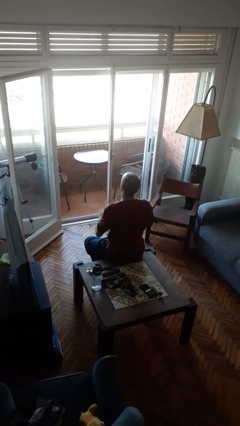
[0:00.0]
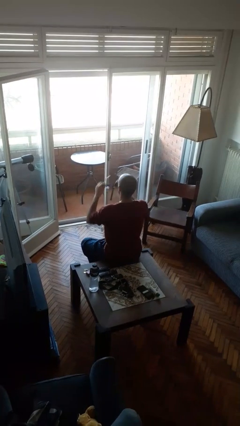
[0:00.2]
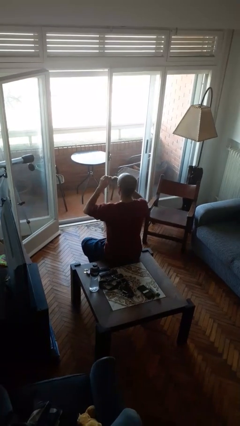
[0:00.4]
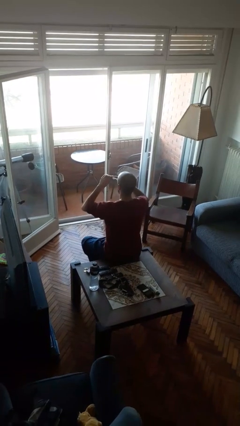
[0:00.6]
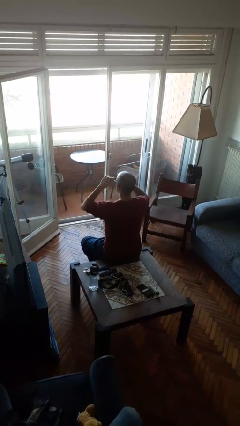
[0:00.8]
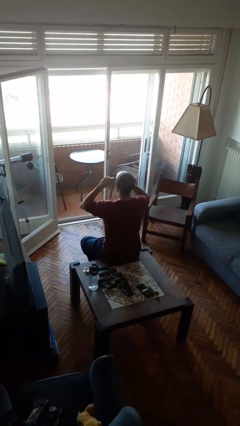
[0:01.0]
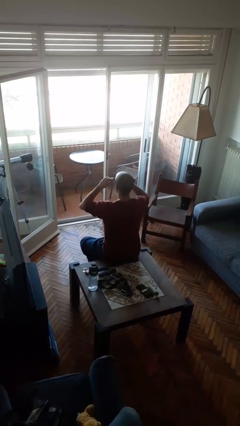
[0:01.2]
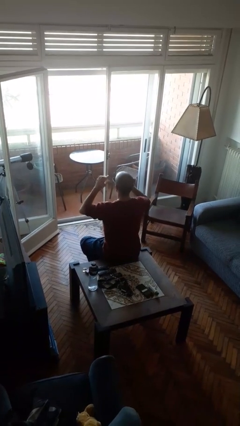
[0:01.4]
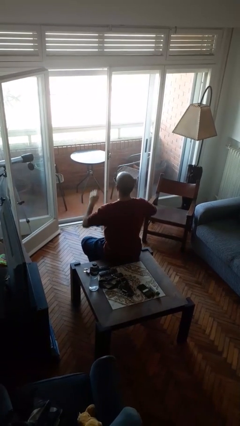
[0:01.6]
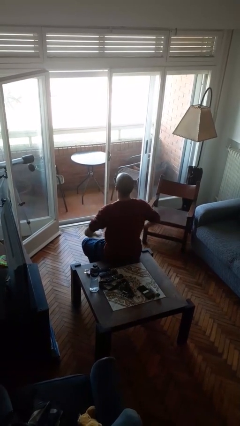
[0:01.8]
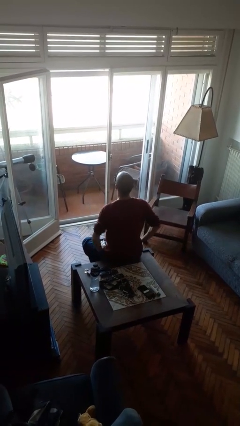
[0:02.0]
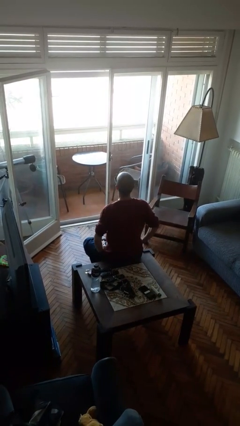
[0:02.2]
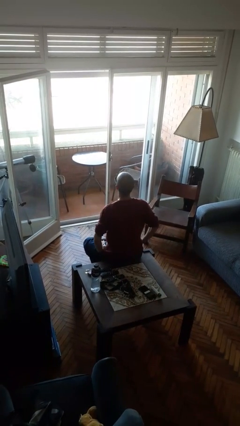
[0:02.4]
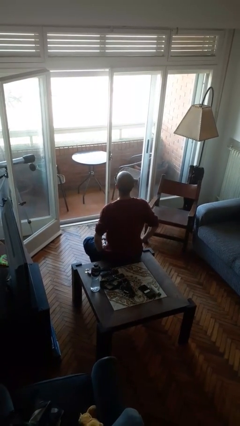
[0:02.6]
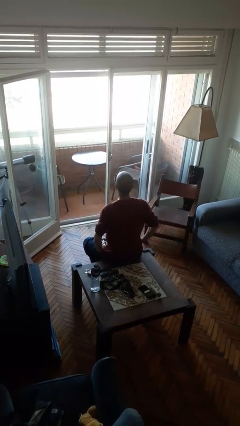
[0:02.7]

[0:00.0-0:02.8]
person puts on sunglasses

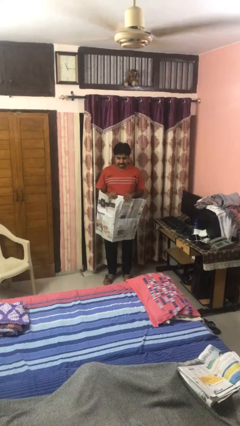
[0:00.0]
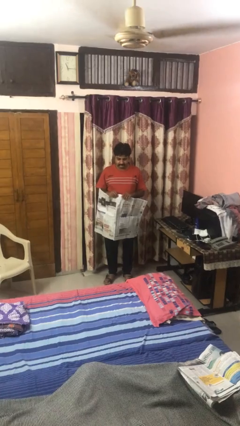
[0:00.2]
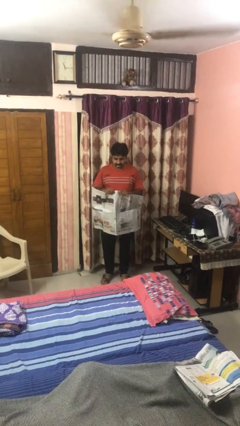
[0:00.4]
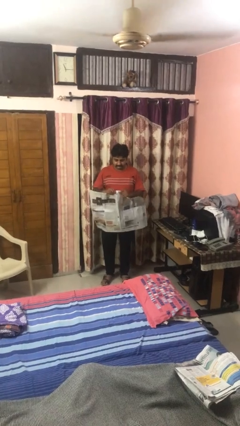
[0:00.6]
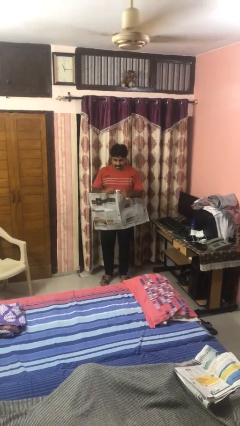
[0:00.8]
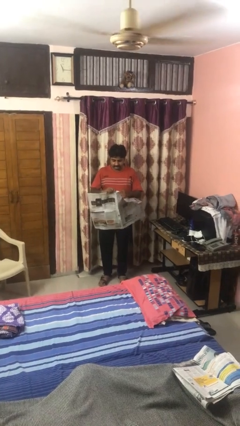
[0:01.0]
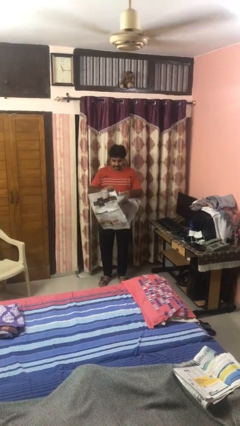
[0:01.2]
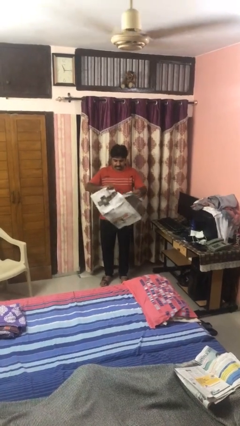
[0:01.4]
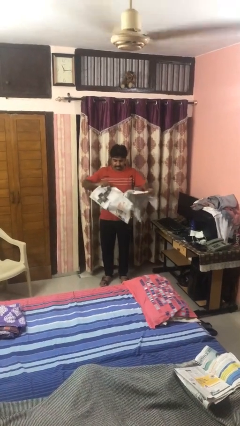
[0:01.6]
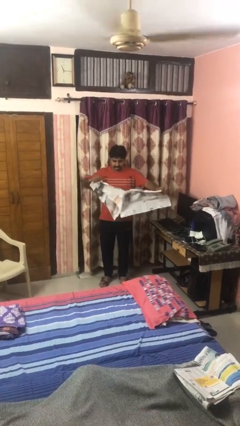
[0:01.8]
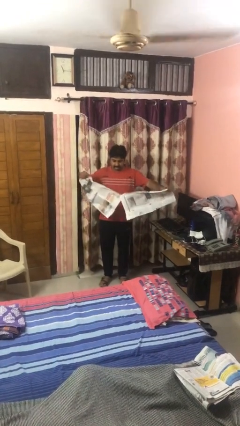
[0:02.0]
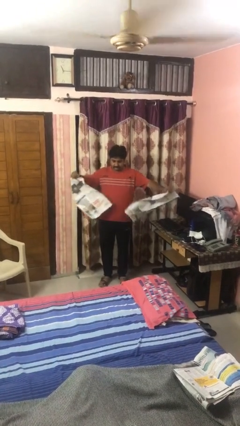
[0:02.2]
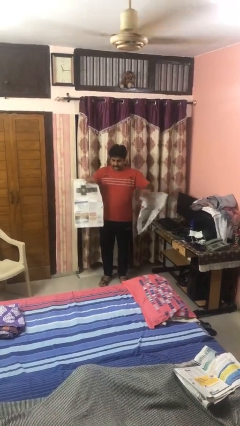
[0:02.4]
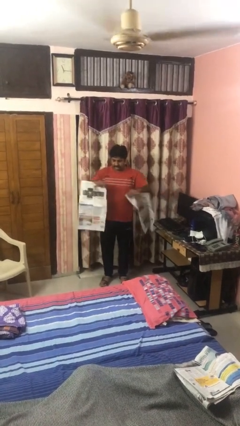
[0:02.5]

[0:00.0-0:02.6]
person tears paper

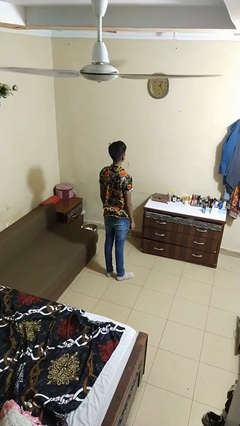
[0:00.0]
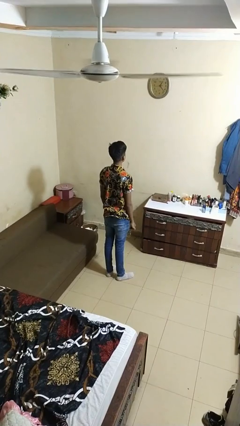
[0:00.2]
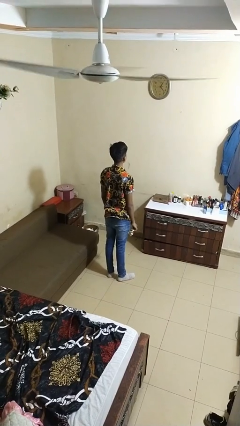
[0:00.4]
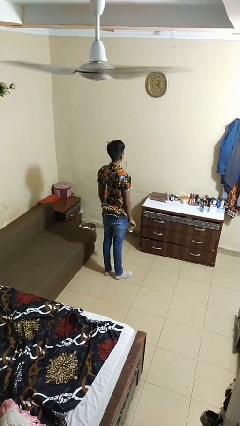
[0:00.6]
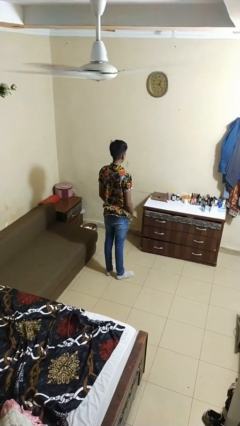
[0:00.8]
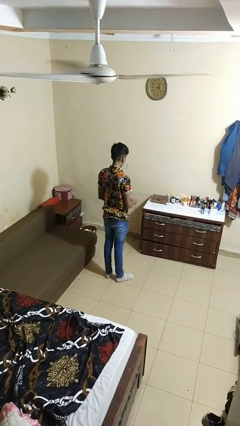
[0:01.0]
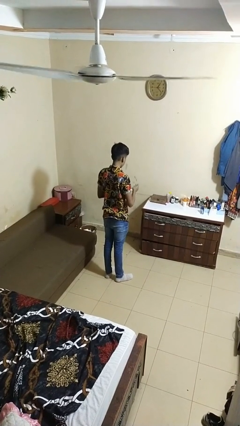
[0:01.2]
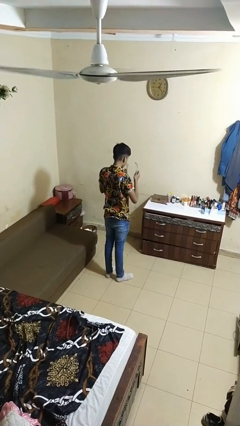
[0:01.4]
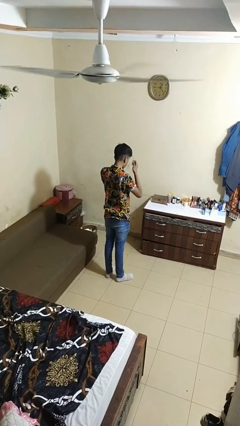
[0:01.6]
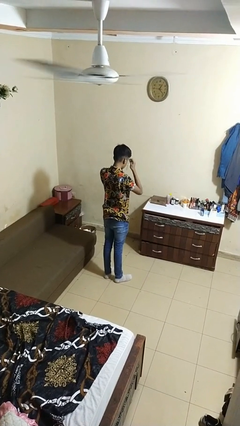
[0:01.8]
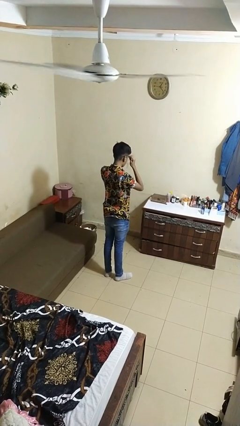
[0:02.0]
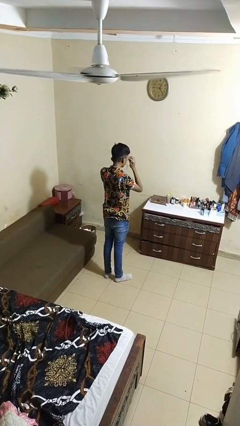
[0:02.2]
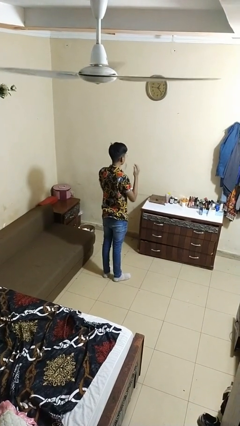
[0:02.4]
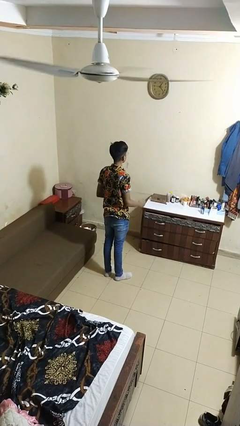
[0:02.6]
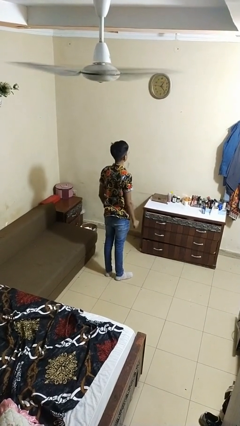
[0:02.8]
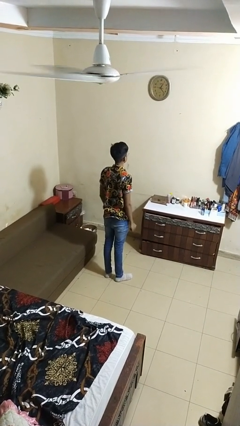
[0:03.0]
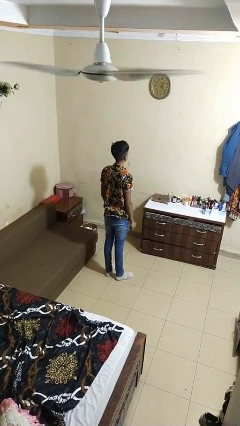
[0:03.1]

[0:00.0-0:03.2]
person puts on glasses

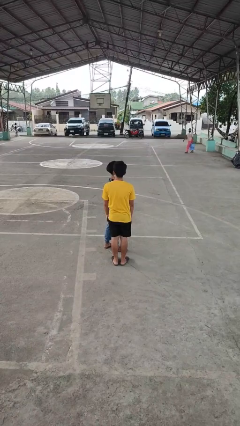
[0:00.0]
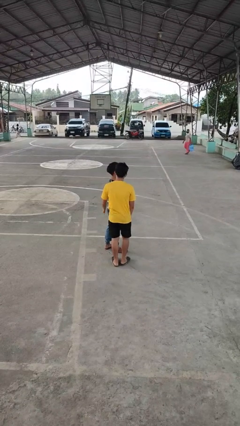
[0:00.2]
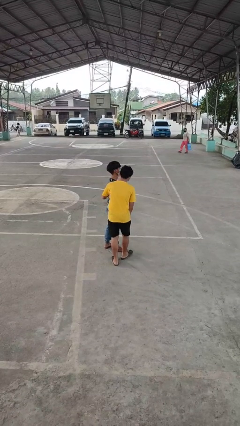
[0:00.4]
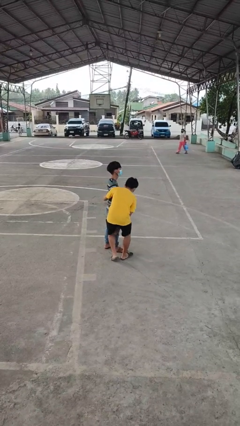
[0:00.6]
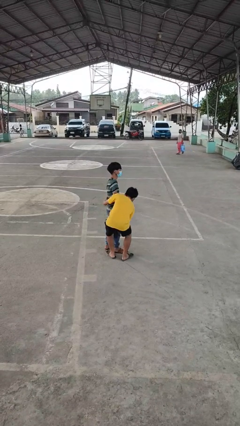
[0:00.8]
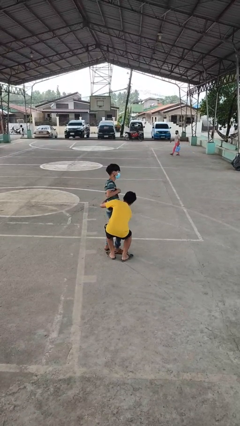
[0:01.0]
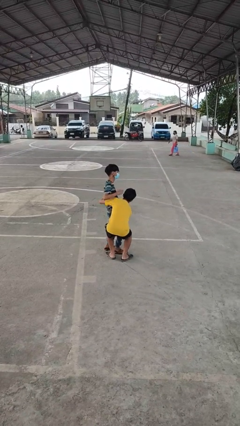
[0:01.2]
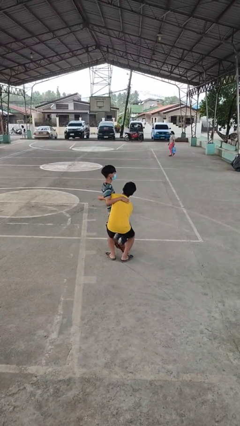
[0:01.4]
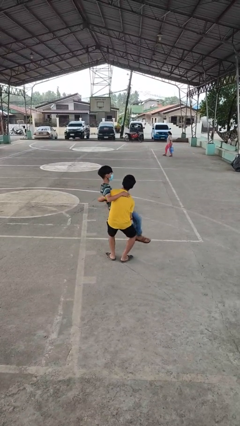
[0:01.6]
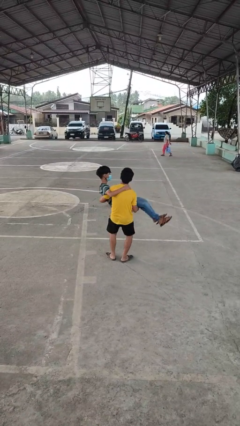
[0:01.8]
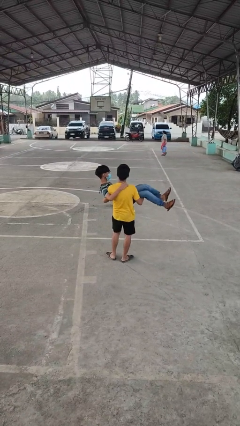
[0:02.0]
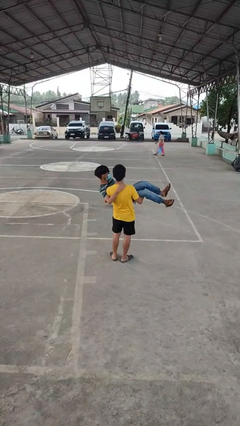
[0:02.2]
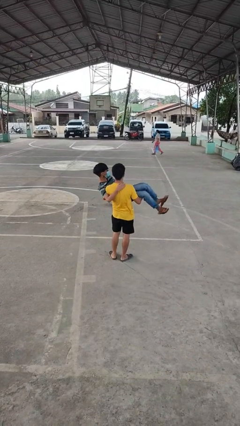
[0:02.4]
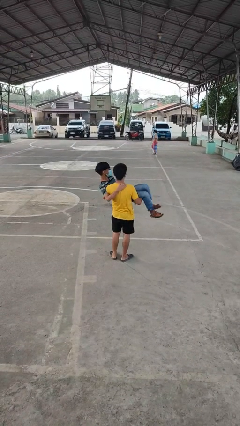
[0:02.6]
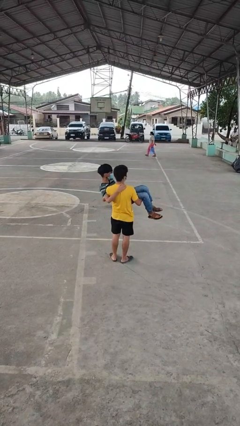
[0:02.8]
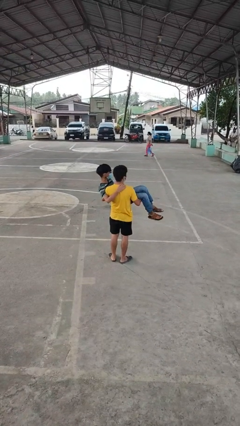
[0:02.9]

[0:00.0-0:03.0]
person picks up person

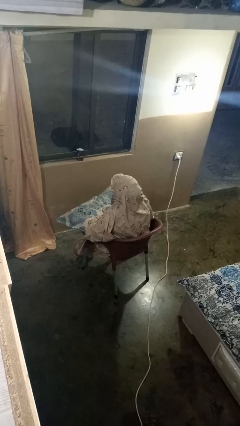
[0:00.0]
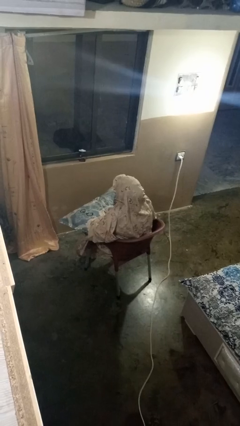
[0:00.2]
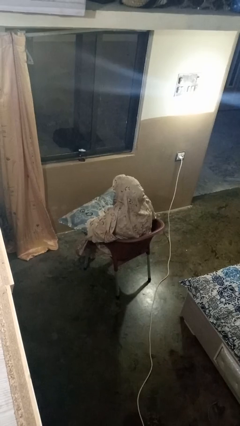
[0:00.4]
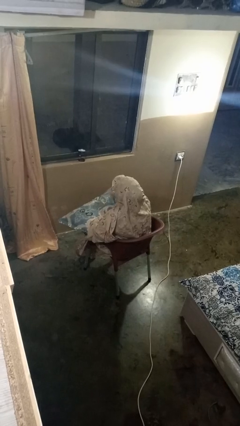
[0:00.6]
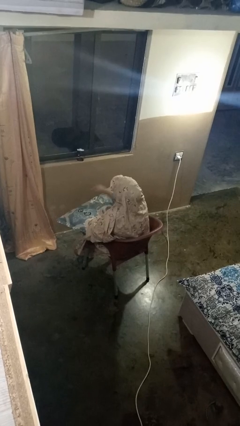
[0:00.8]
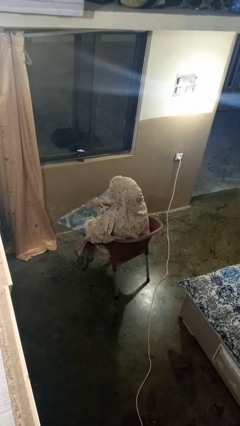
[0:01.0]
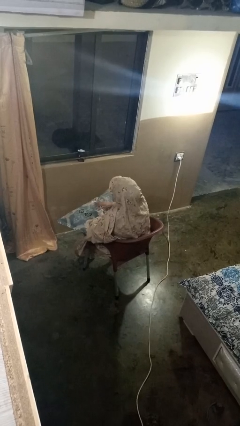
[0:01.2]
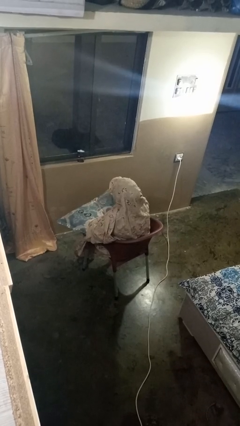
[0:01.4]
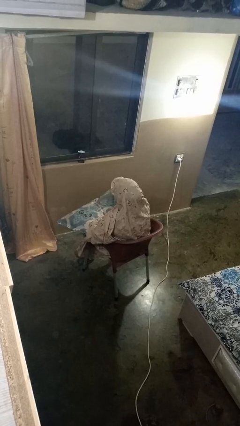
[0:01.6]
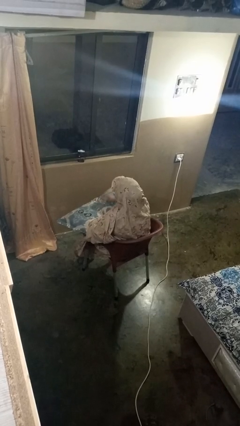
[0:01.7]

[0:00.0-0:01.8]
person waves hand over object

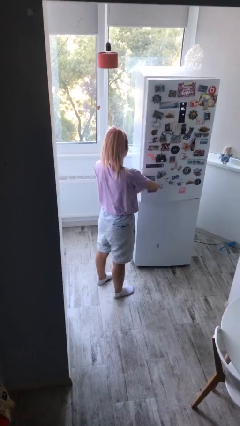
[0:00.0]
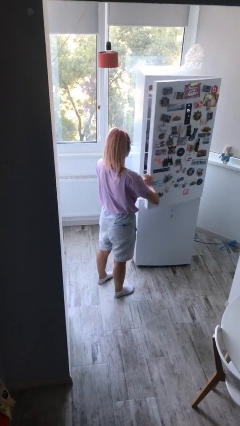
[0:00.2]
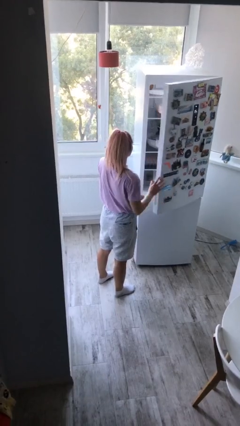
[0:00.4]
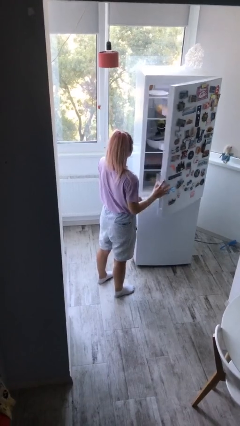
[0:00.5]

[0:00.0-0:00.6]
person opens refrigerator

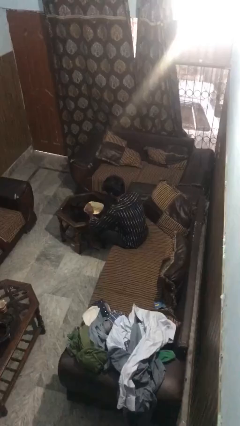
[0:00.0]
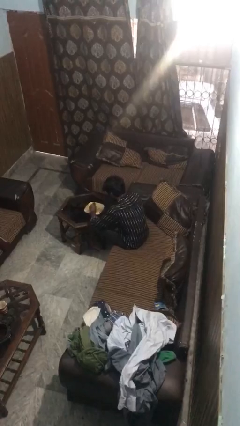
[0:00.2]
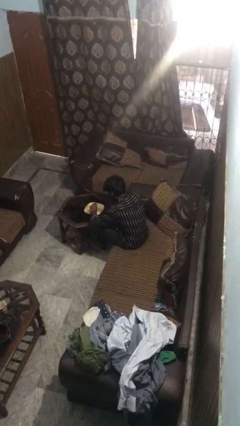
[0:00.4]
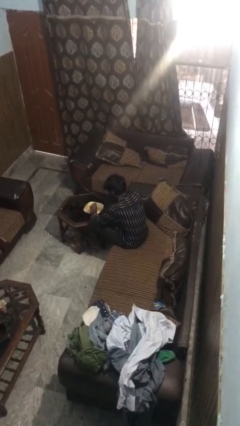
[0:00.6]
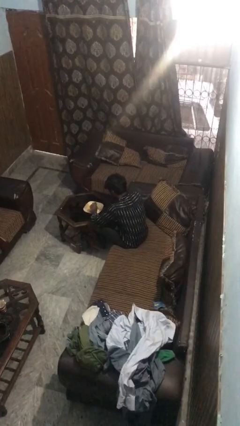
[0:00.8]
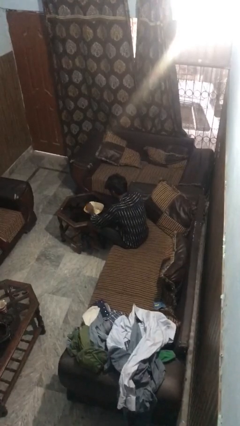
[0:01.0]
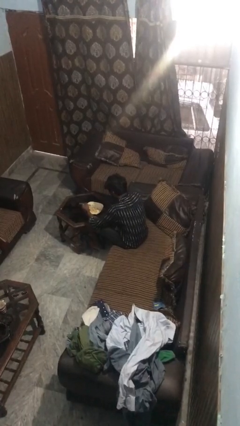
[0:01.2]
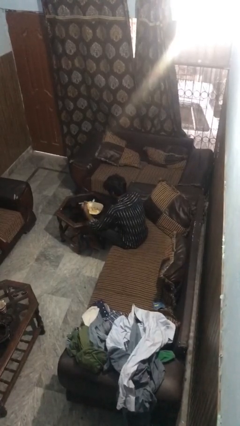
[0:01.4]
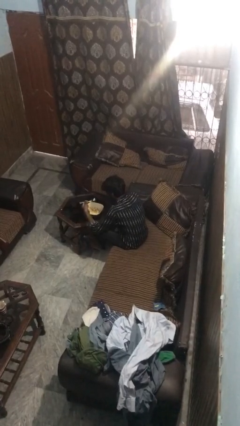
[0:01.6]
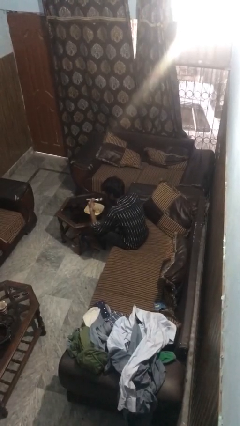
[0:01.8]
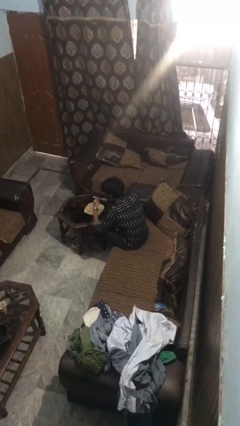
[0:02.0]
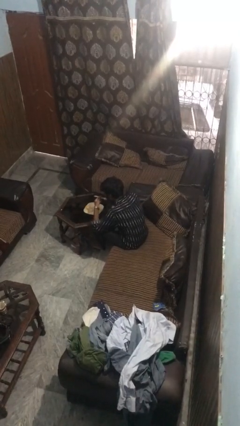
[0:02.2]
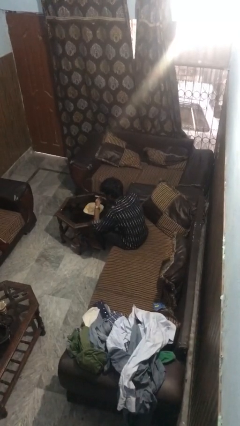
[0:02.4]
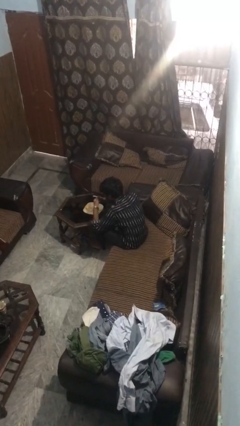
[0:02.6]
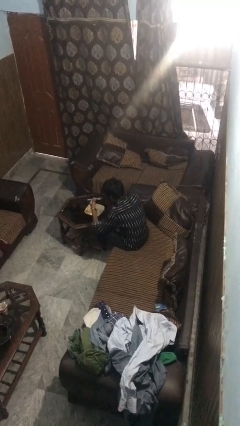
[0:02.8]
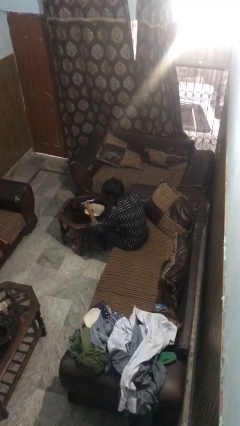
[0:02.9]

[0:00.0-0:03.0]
person eats with utensil
